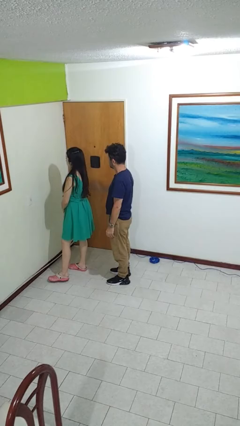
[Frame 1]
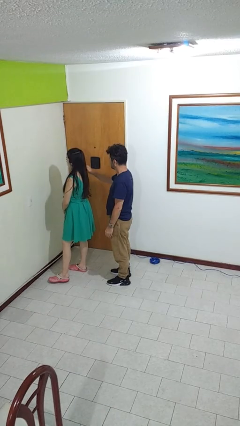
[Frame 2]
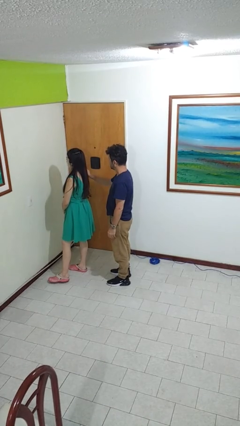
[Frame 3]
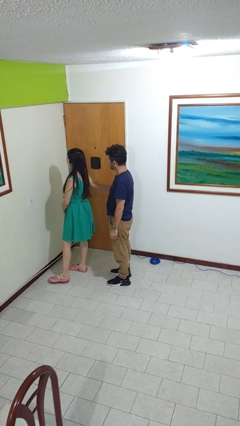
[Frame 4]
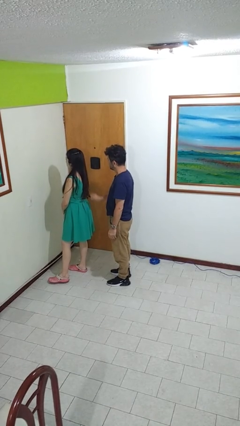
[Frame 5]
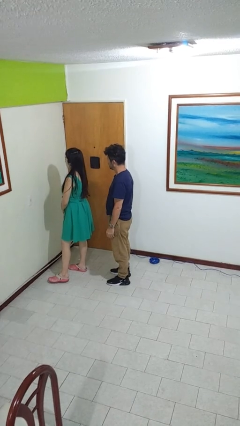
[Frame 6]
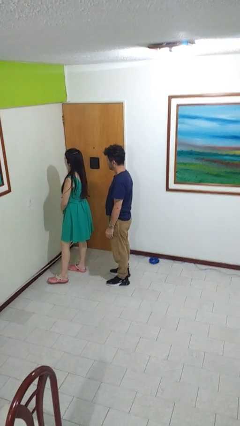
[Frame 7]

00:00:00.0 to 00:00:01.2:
person touches back of person

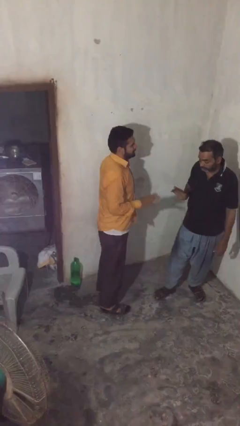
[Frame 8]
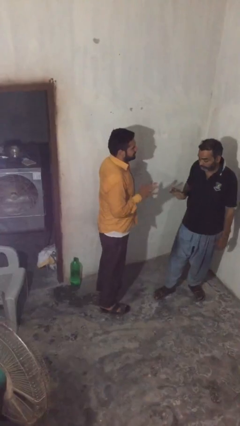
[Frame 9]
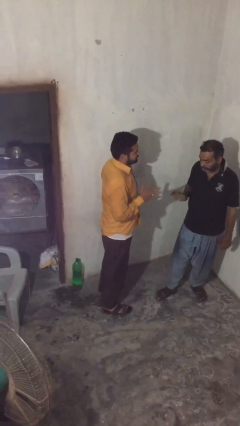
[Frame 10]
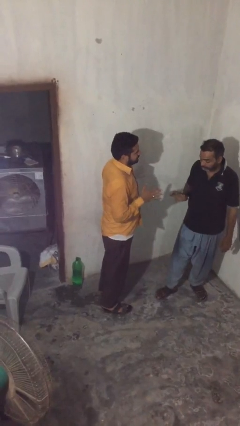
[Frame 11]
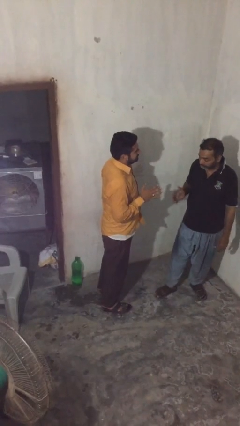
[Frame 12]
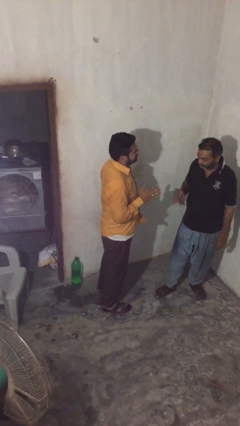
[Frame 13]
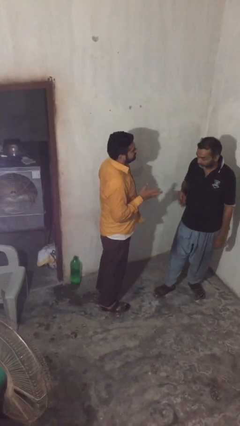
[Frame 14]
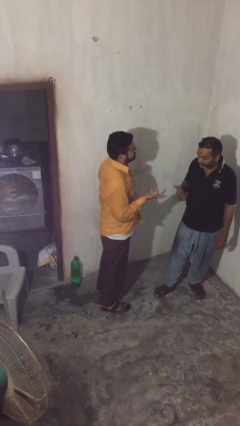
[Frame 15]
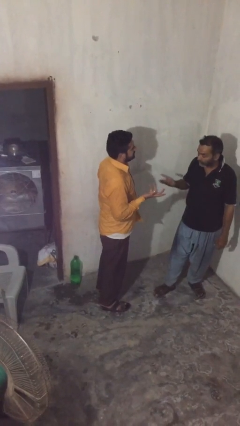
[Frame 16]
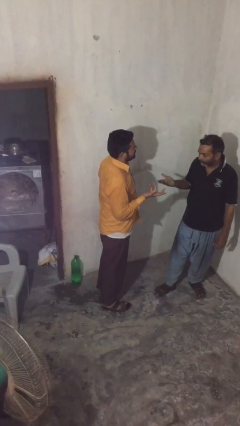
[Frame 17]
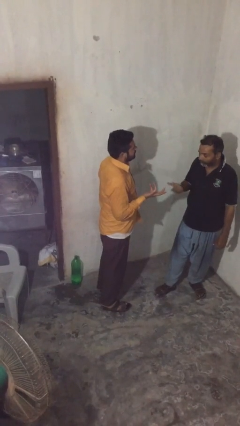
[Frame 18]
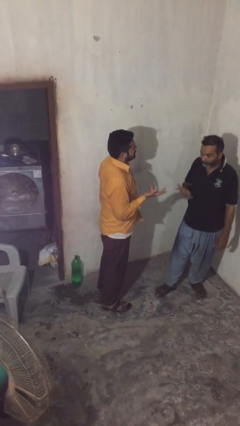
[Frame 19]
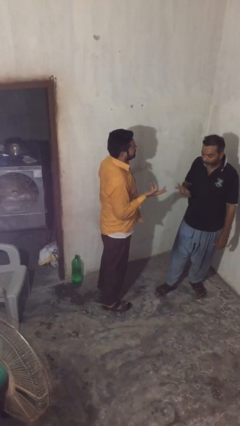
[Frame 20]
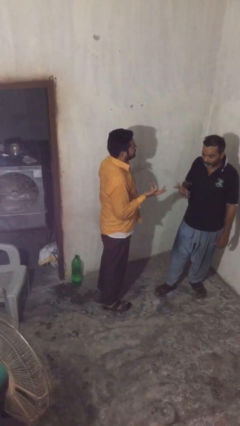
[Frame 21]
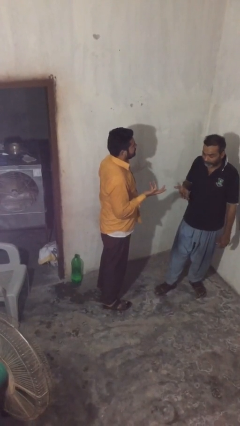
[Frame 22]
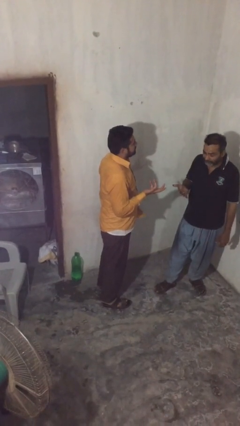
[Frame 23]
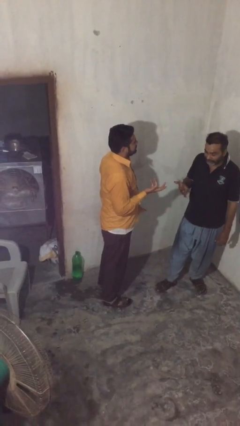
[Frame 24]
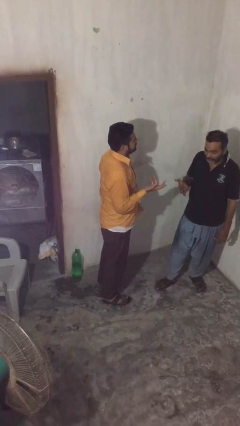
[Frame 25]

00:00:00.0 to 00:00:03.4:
person talks to person

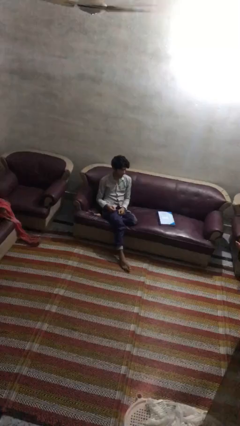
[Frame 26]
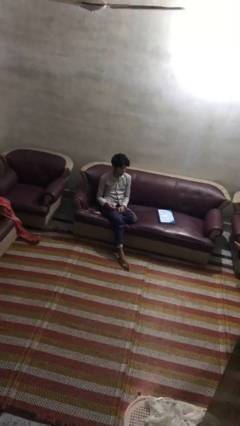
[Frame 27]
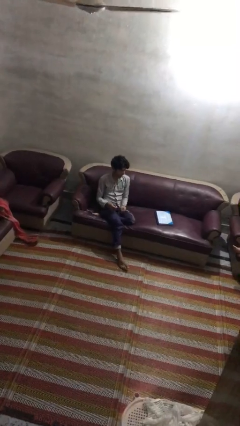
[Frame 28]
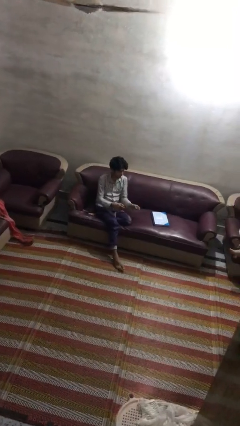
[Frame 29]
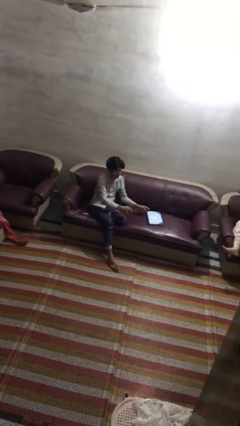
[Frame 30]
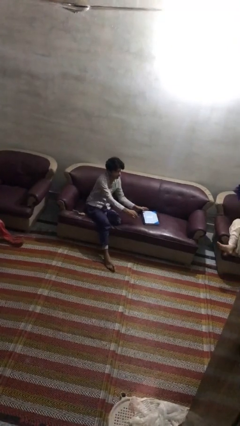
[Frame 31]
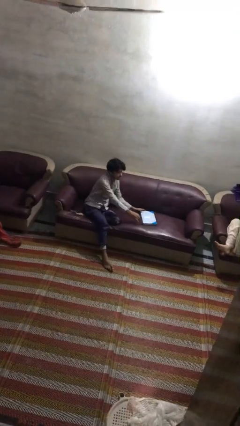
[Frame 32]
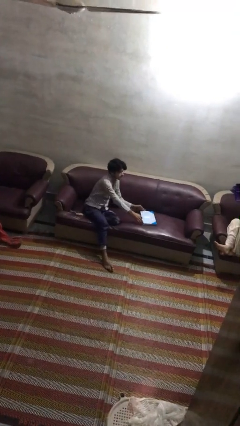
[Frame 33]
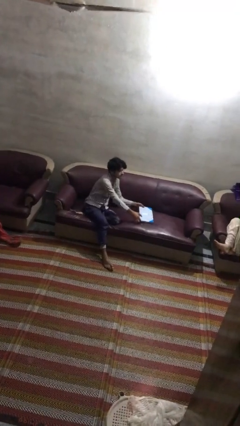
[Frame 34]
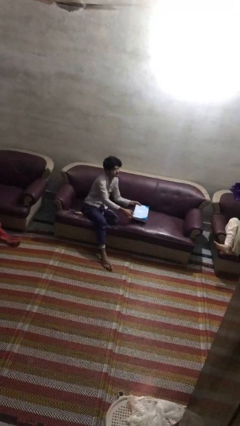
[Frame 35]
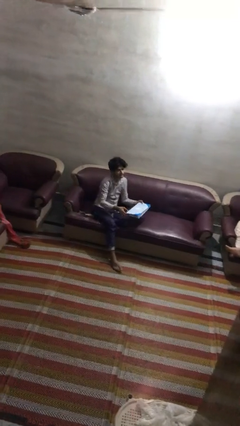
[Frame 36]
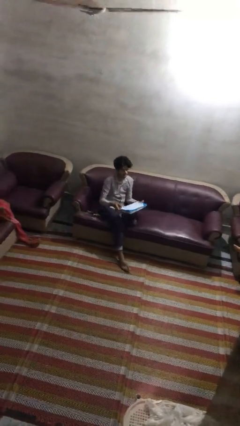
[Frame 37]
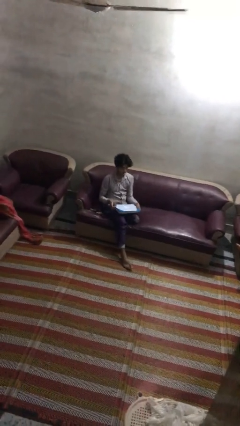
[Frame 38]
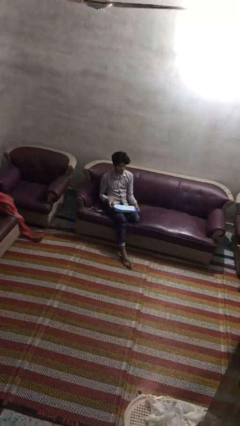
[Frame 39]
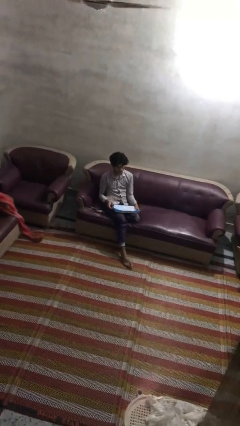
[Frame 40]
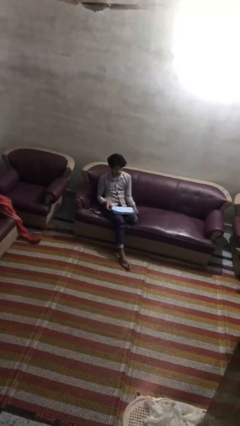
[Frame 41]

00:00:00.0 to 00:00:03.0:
person picks up object from couch

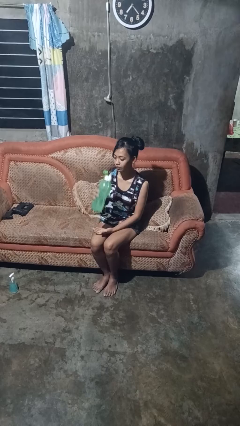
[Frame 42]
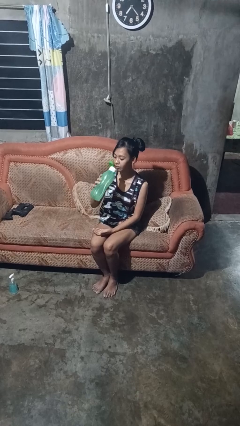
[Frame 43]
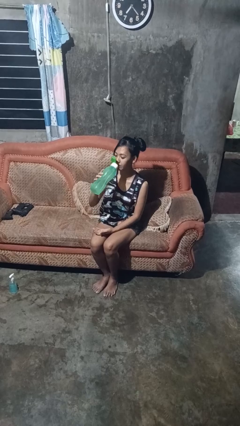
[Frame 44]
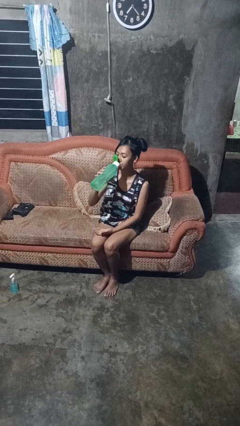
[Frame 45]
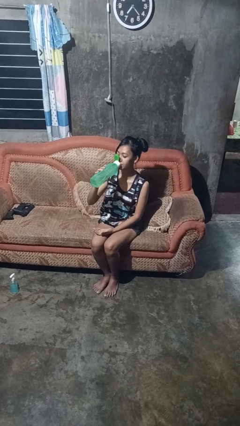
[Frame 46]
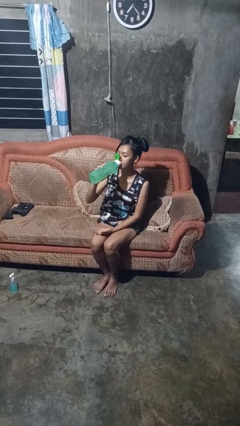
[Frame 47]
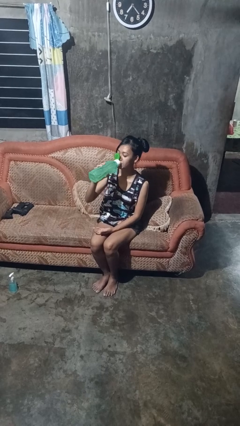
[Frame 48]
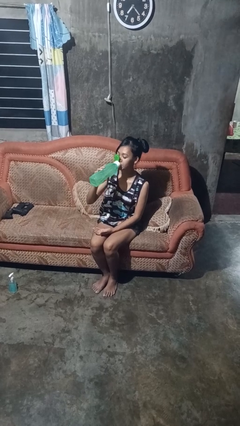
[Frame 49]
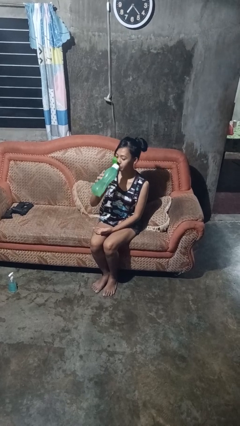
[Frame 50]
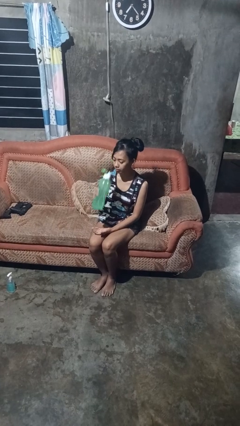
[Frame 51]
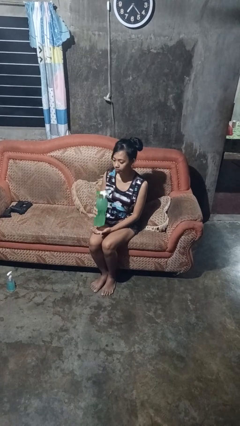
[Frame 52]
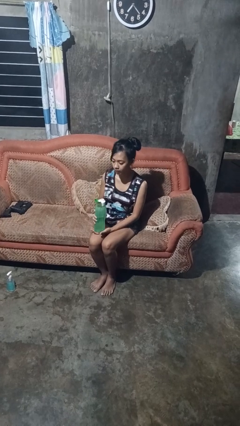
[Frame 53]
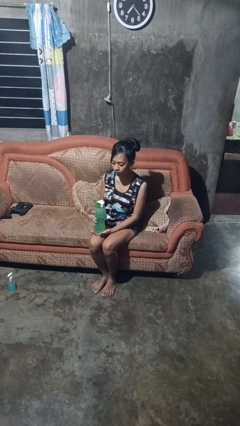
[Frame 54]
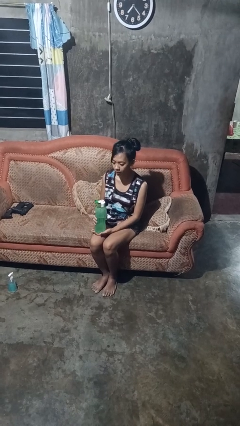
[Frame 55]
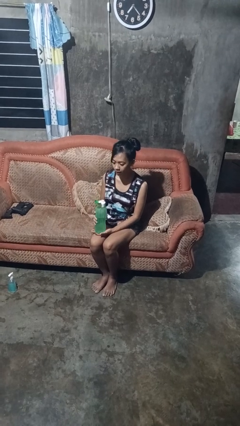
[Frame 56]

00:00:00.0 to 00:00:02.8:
person drinks from bottle

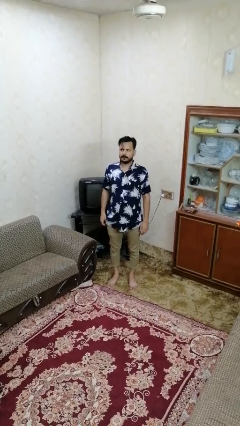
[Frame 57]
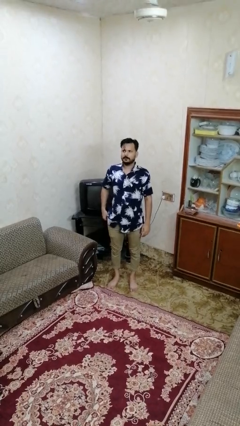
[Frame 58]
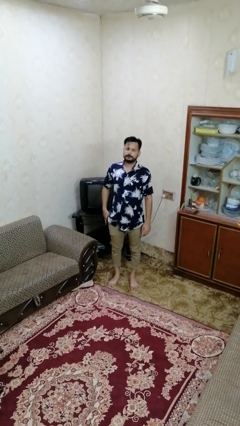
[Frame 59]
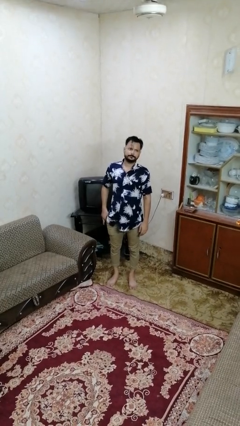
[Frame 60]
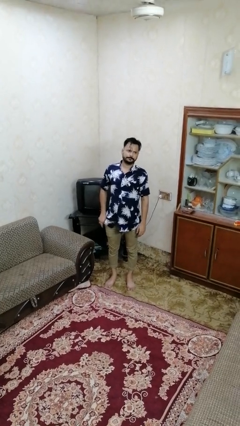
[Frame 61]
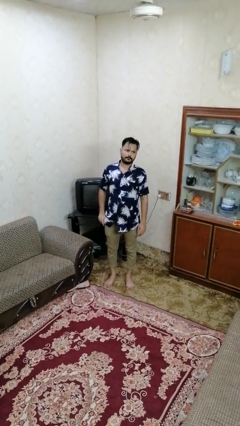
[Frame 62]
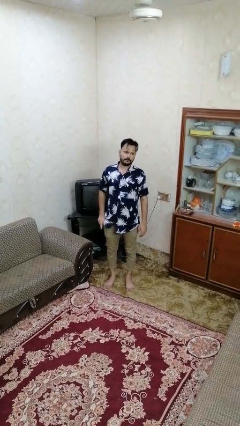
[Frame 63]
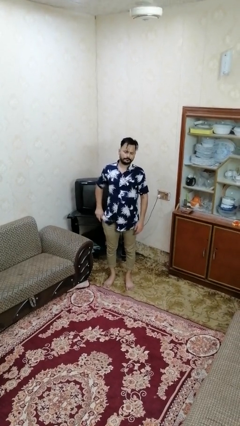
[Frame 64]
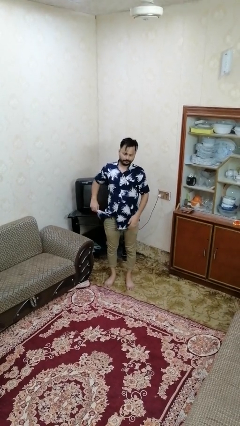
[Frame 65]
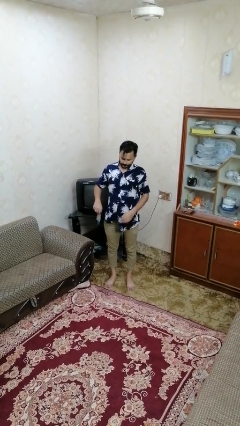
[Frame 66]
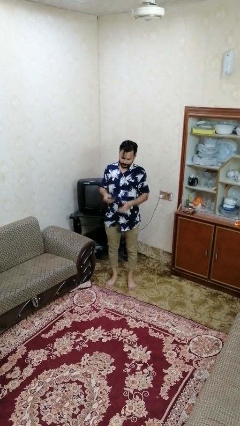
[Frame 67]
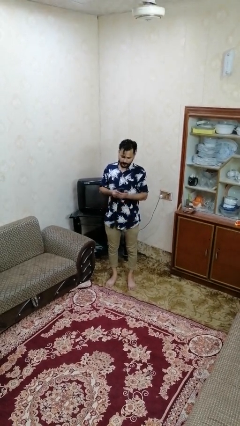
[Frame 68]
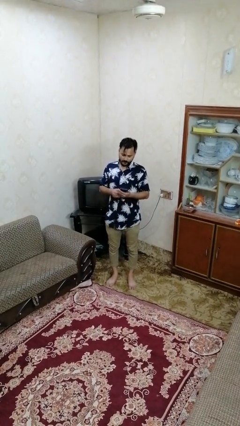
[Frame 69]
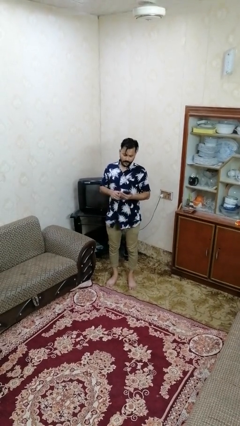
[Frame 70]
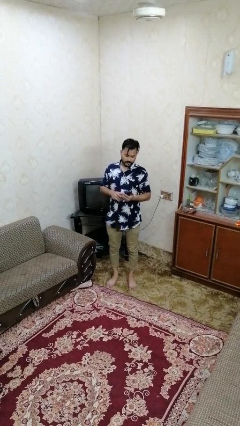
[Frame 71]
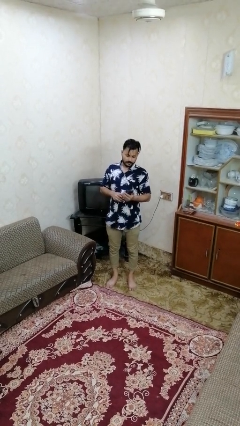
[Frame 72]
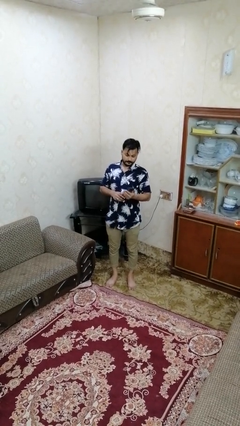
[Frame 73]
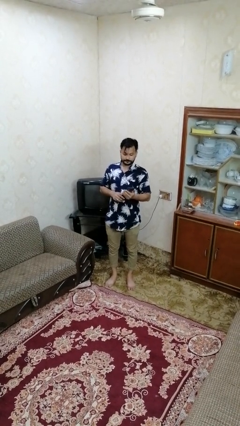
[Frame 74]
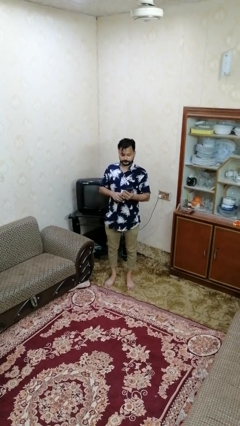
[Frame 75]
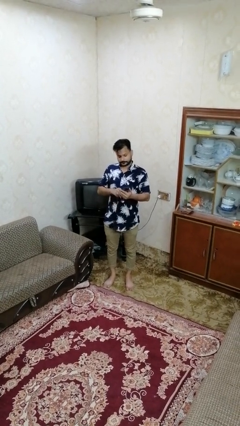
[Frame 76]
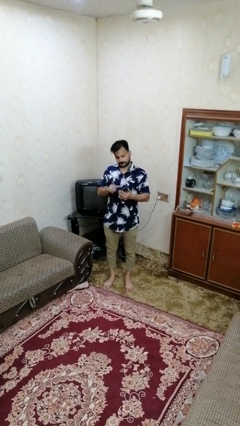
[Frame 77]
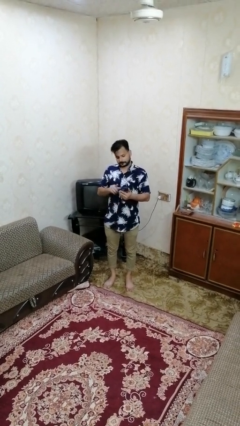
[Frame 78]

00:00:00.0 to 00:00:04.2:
person takes phone from pocket

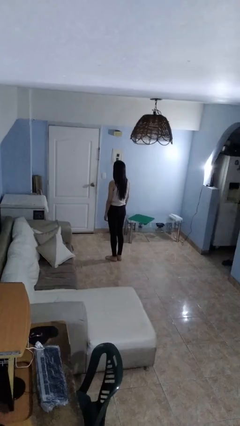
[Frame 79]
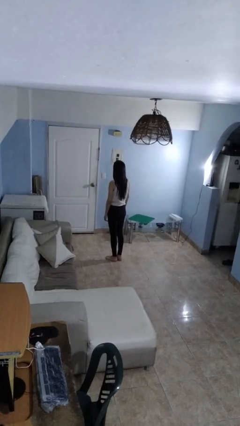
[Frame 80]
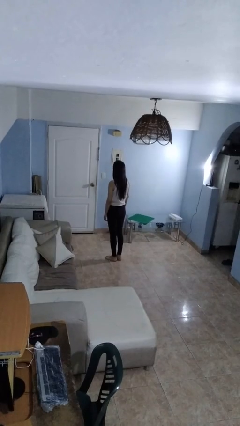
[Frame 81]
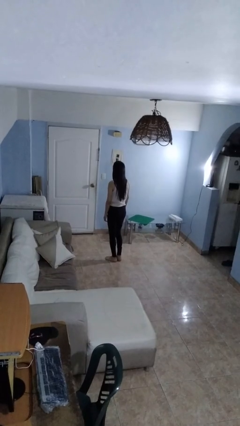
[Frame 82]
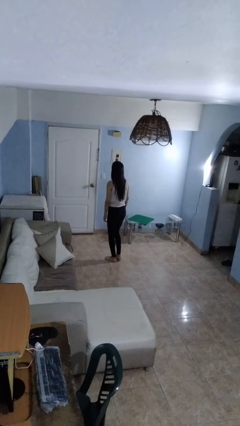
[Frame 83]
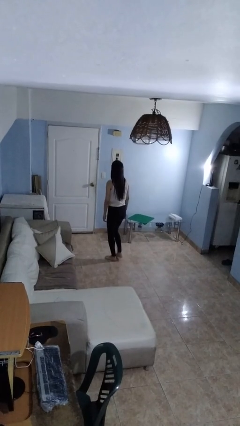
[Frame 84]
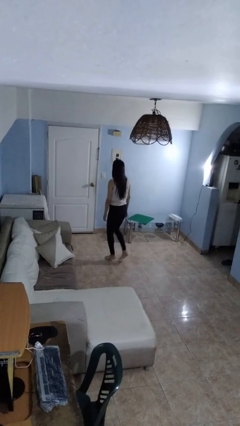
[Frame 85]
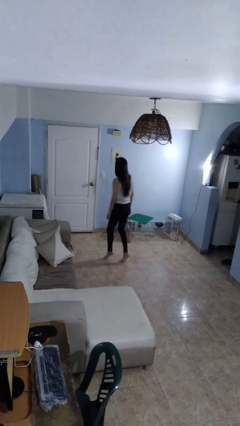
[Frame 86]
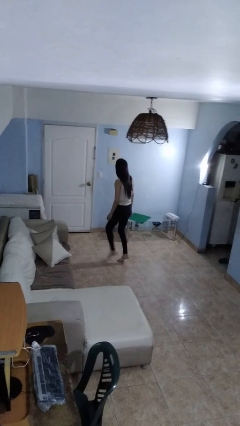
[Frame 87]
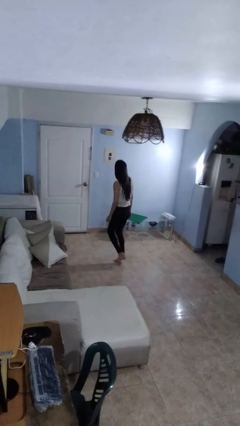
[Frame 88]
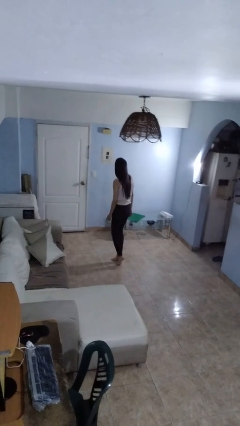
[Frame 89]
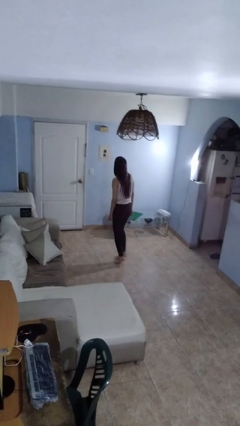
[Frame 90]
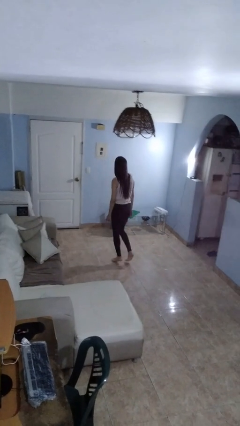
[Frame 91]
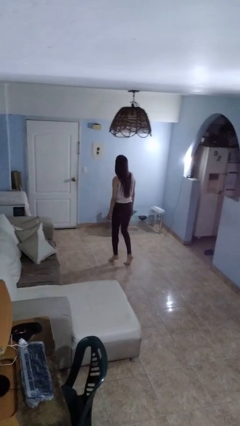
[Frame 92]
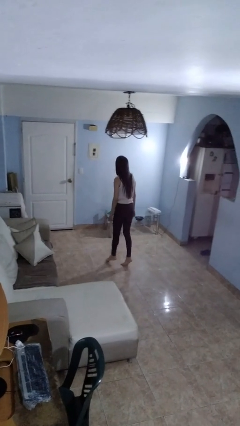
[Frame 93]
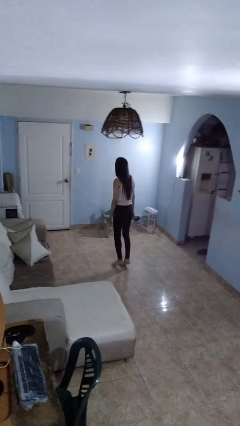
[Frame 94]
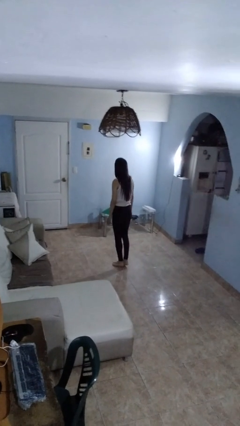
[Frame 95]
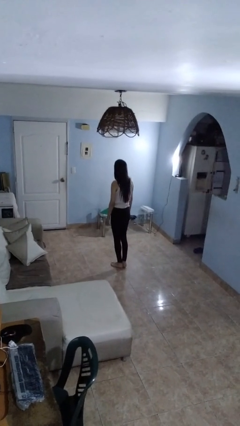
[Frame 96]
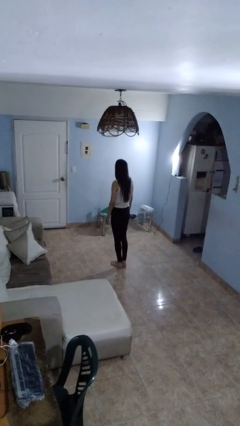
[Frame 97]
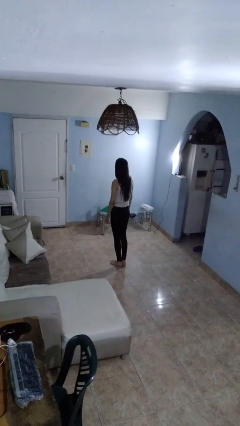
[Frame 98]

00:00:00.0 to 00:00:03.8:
person walks tiptoe
